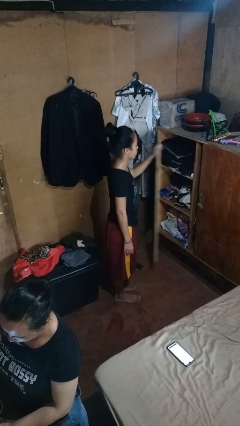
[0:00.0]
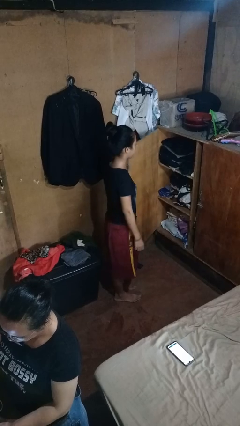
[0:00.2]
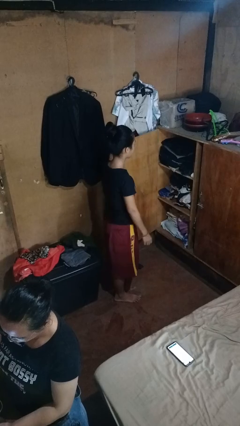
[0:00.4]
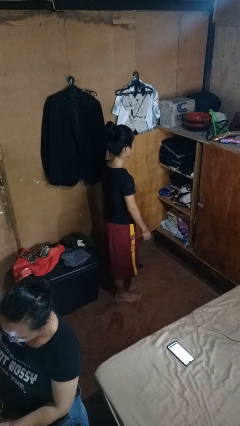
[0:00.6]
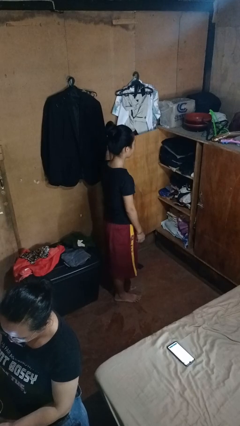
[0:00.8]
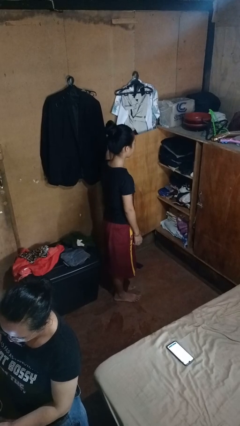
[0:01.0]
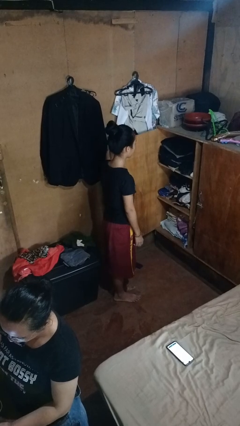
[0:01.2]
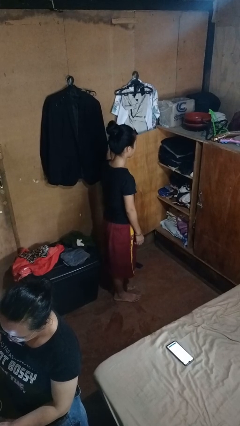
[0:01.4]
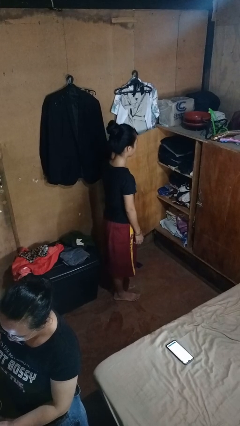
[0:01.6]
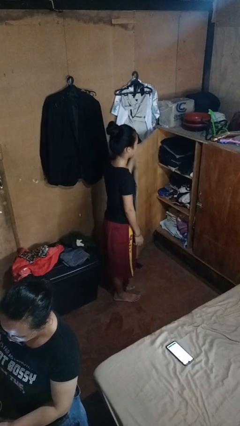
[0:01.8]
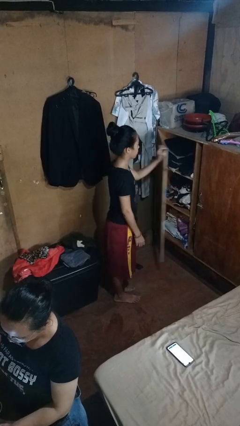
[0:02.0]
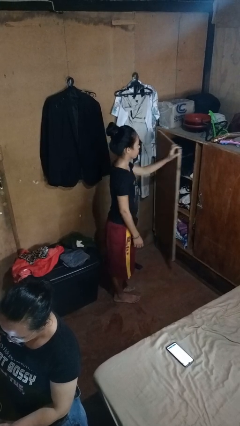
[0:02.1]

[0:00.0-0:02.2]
person opens closet door

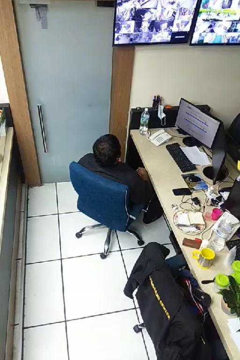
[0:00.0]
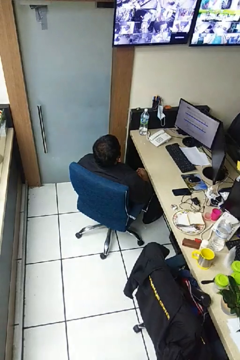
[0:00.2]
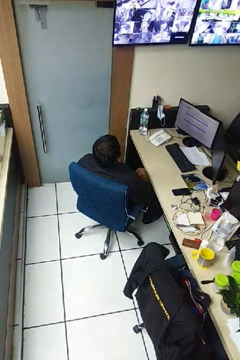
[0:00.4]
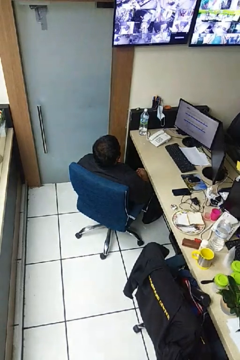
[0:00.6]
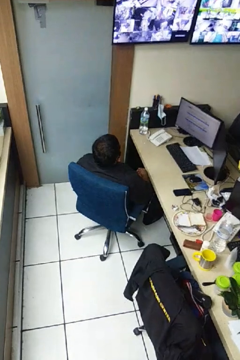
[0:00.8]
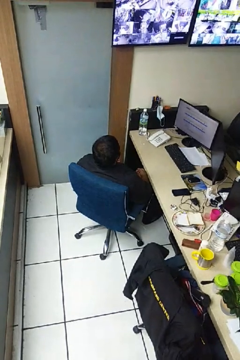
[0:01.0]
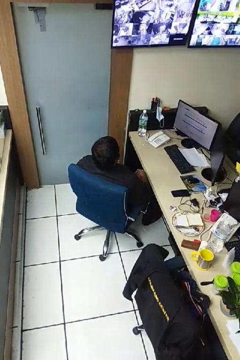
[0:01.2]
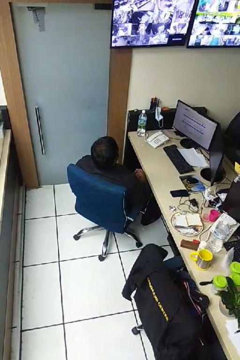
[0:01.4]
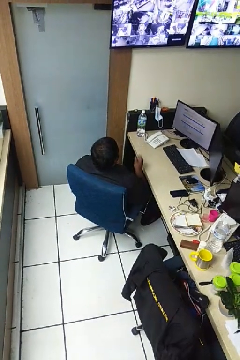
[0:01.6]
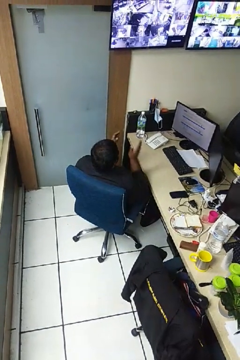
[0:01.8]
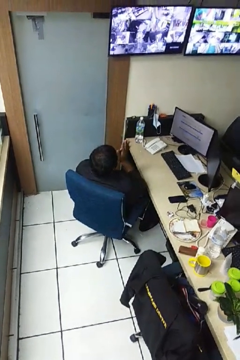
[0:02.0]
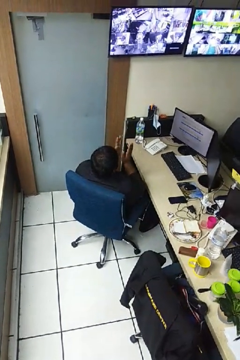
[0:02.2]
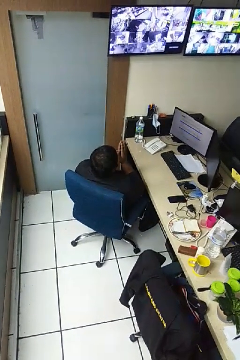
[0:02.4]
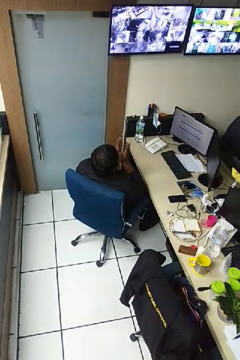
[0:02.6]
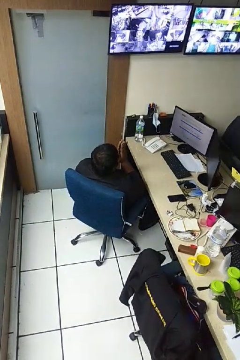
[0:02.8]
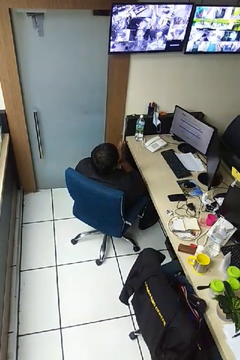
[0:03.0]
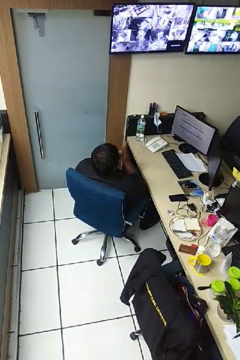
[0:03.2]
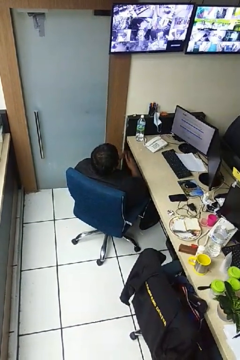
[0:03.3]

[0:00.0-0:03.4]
person claps hands

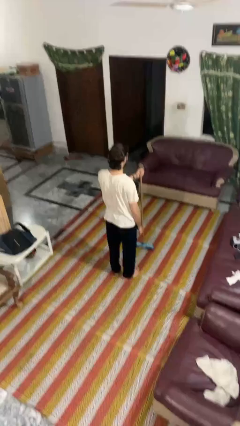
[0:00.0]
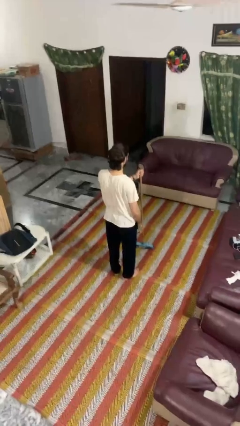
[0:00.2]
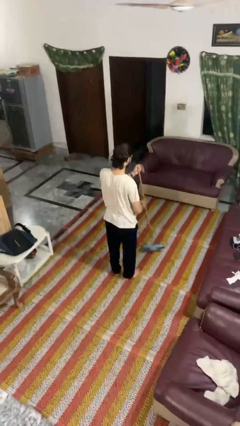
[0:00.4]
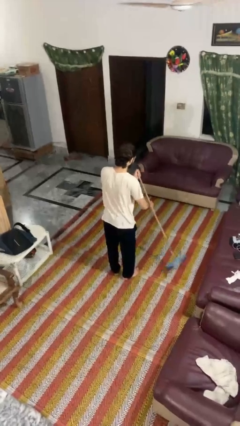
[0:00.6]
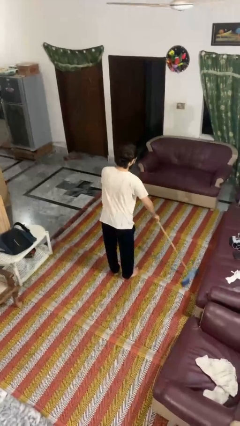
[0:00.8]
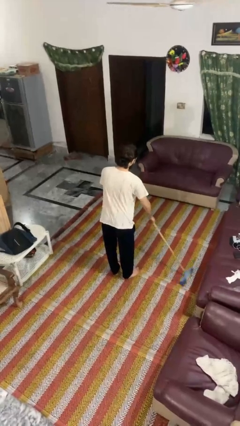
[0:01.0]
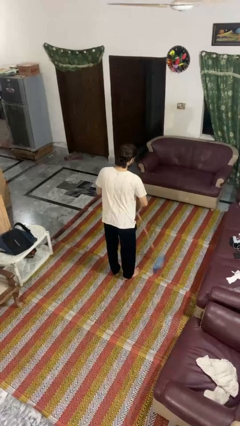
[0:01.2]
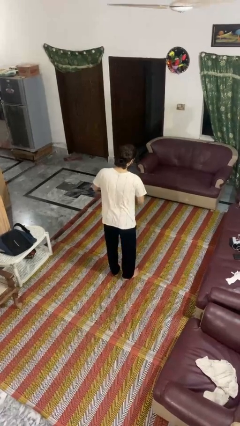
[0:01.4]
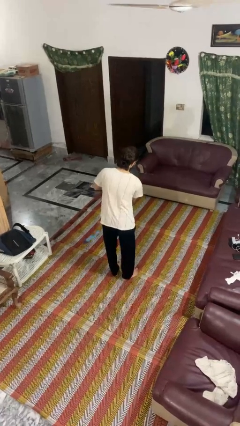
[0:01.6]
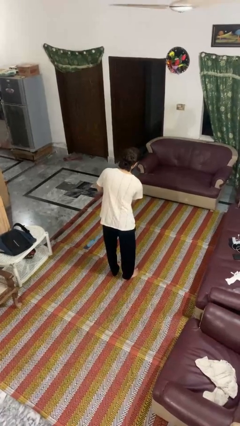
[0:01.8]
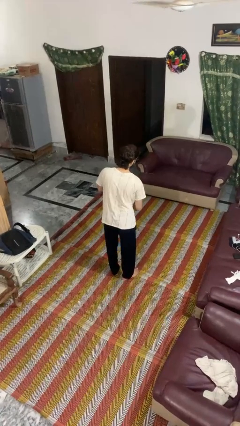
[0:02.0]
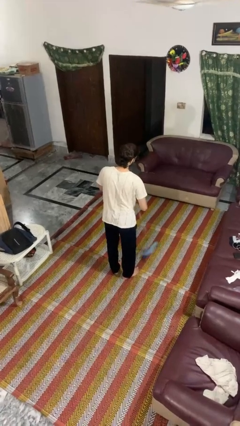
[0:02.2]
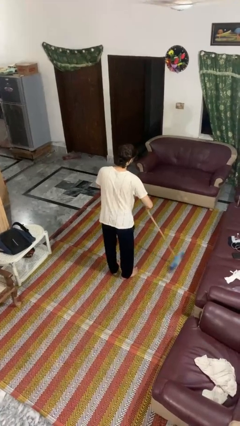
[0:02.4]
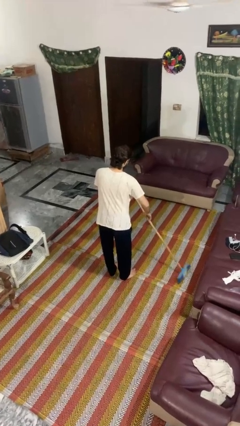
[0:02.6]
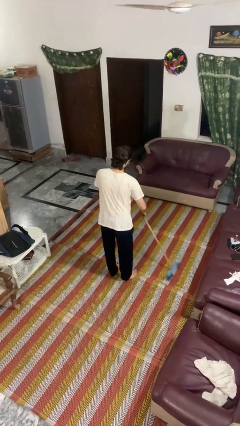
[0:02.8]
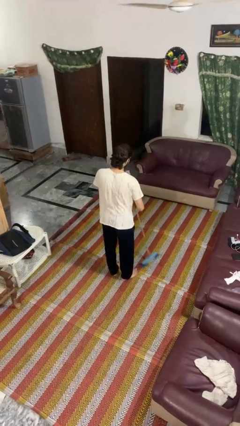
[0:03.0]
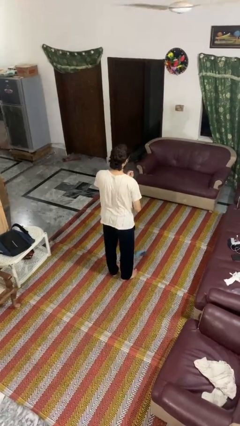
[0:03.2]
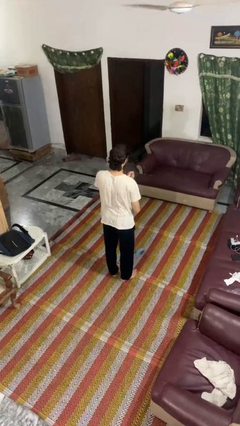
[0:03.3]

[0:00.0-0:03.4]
person sweeps floor

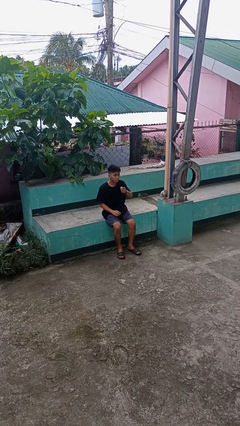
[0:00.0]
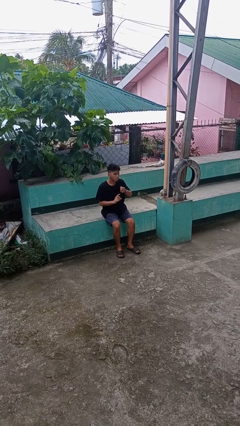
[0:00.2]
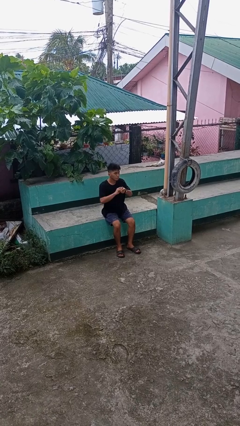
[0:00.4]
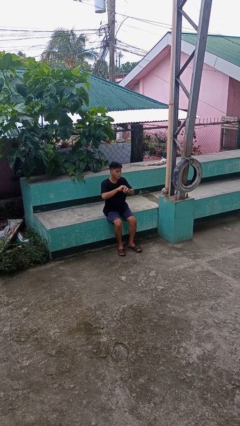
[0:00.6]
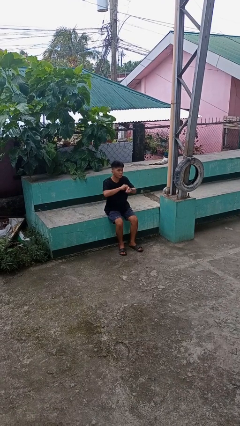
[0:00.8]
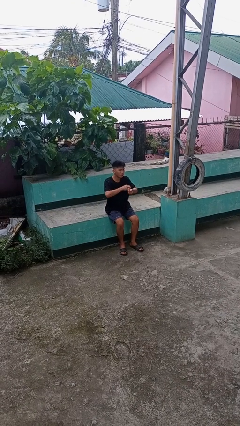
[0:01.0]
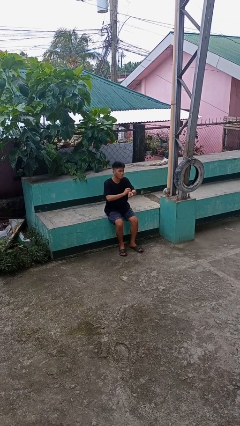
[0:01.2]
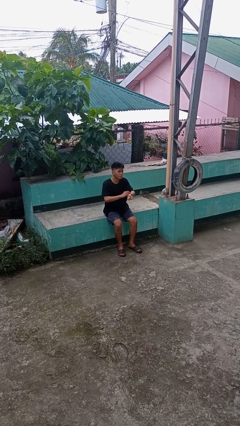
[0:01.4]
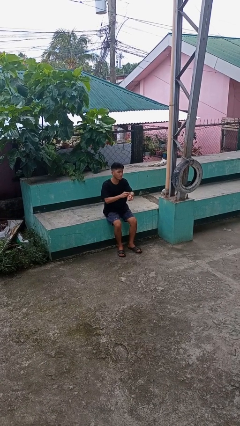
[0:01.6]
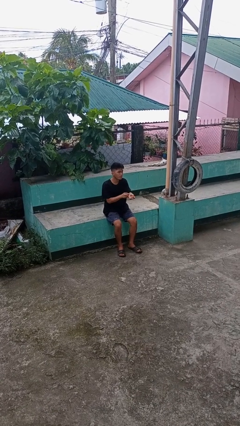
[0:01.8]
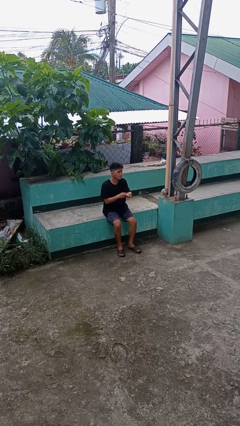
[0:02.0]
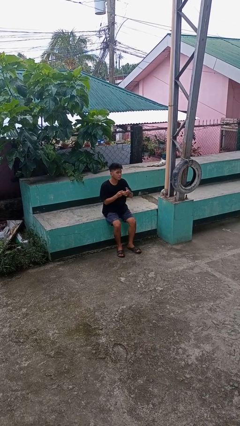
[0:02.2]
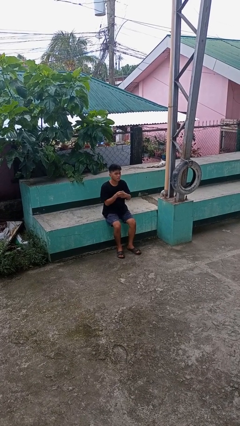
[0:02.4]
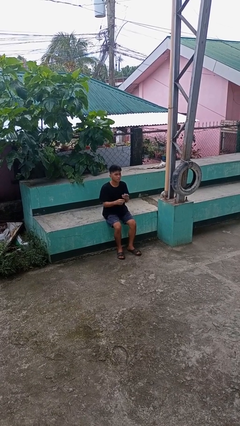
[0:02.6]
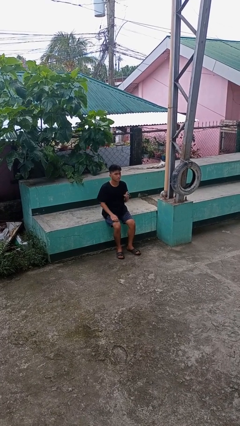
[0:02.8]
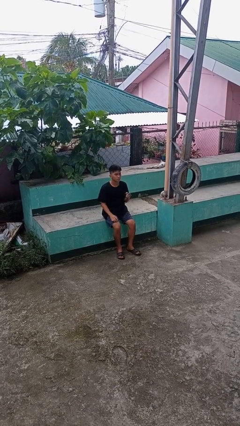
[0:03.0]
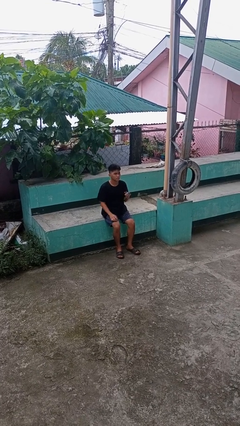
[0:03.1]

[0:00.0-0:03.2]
person takes off wristwatch

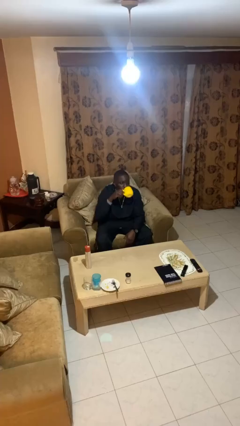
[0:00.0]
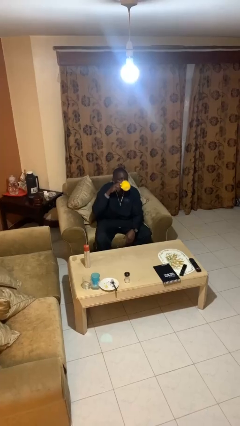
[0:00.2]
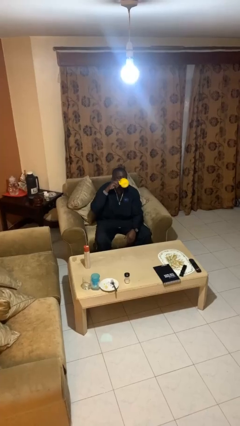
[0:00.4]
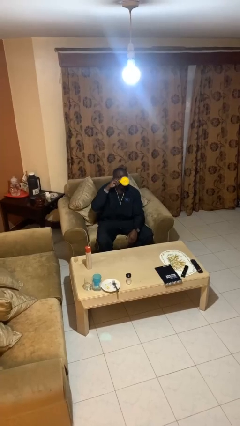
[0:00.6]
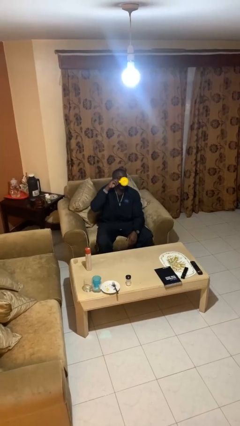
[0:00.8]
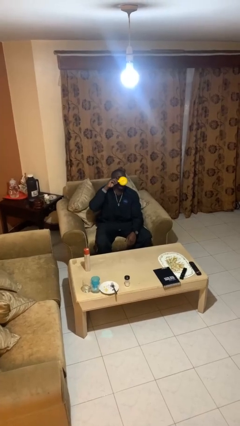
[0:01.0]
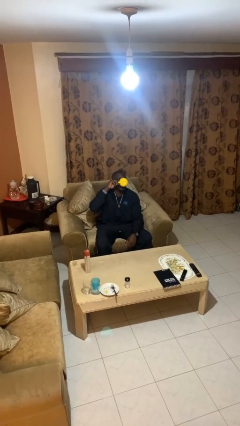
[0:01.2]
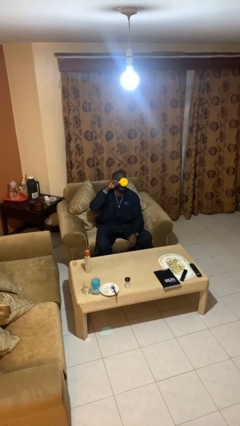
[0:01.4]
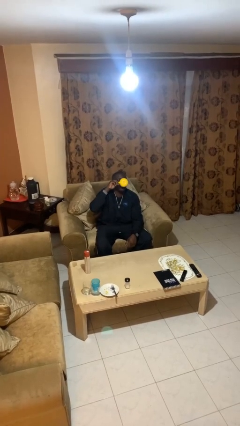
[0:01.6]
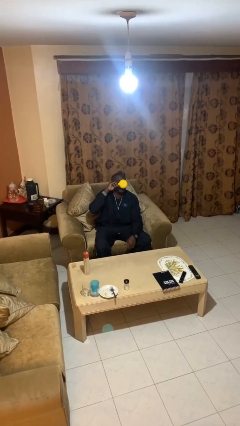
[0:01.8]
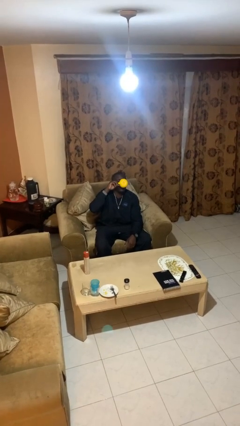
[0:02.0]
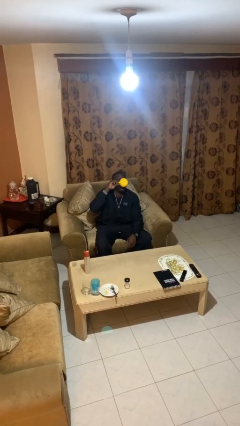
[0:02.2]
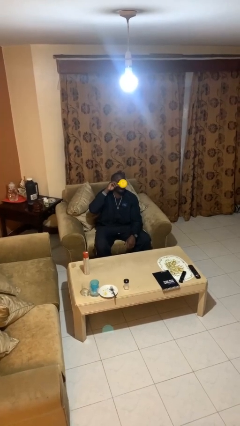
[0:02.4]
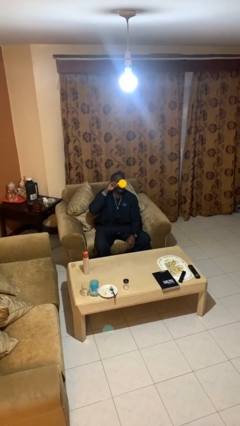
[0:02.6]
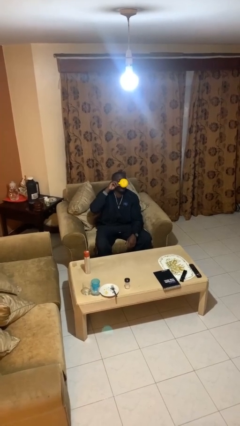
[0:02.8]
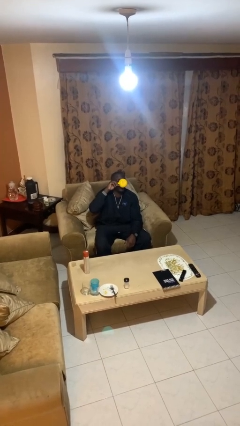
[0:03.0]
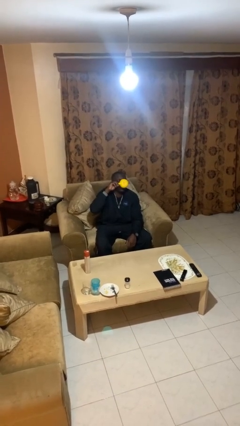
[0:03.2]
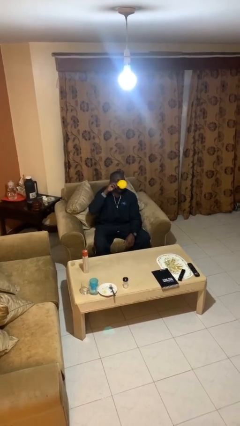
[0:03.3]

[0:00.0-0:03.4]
person drinks from mug

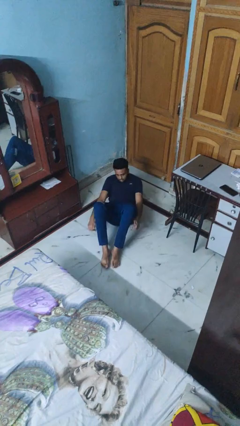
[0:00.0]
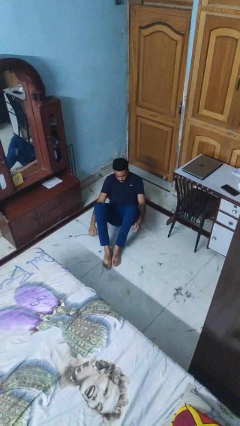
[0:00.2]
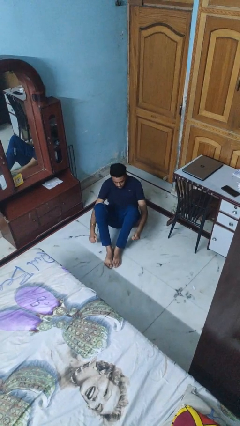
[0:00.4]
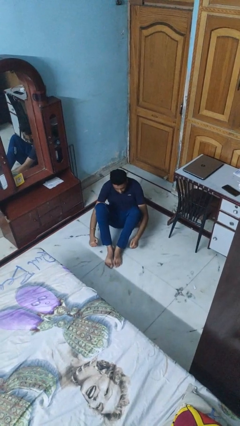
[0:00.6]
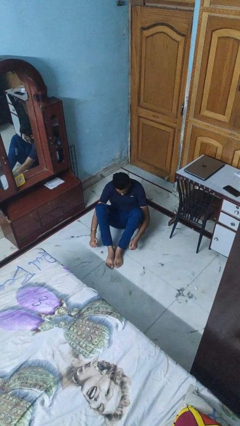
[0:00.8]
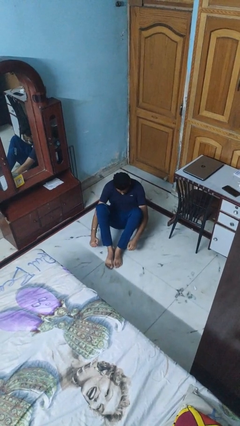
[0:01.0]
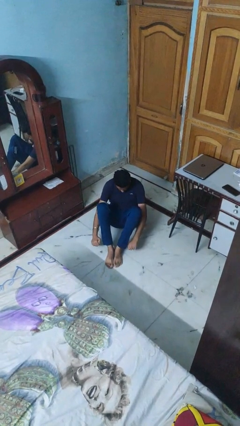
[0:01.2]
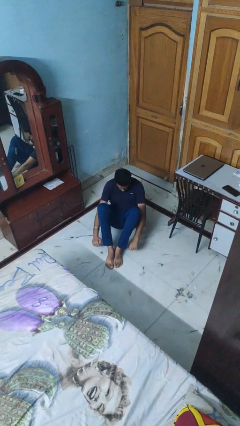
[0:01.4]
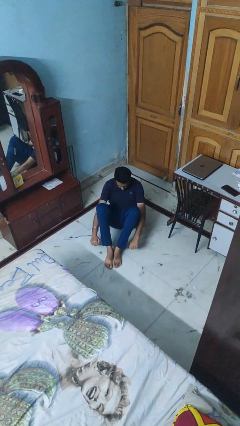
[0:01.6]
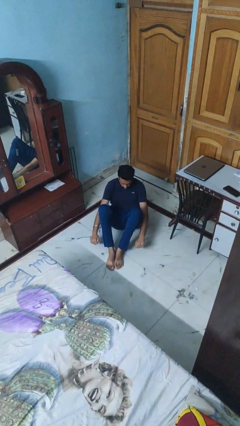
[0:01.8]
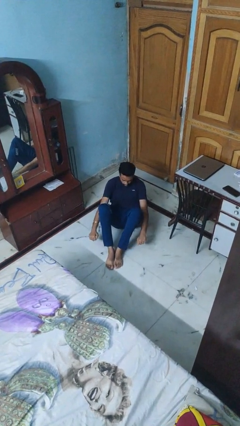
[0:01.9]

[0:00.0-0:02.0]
person exercises with situp

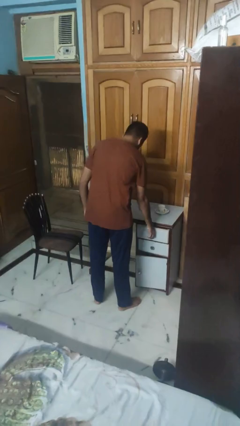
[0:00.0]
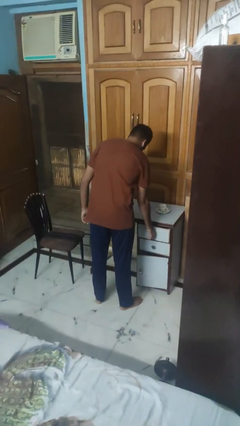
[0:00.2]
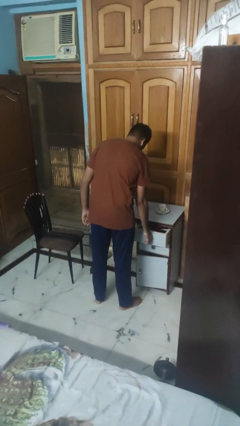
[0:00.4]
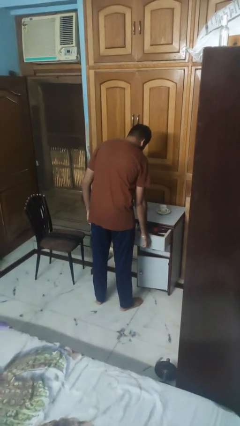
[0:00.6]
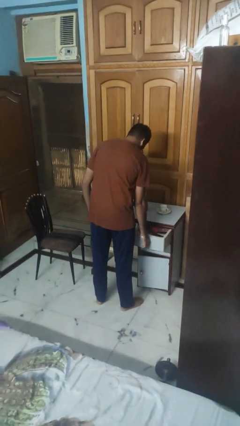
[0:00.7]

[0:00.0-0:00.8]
person opens kitchen drawer
